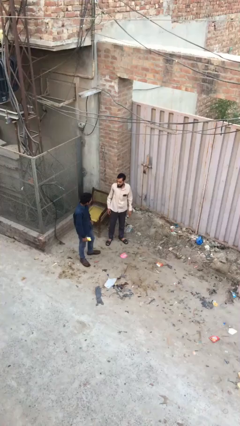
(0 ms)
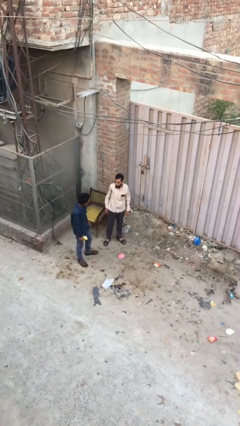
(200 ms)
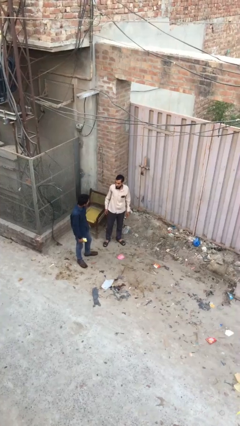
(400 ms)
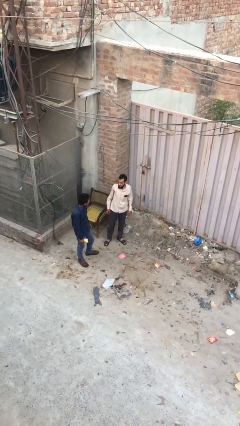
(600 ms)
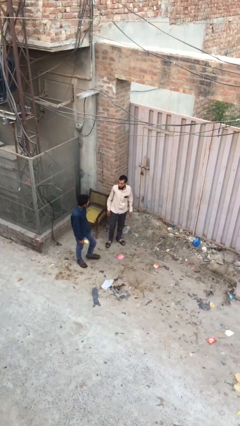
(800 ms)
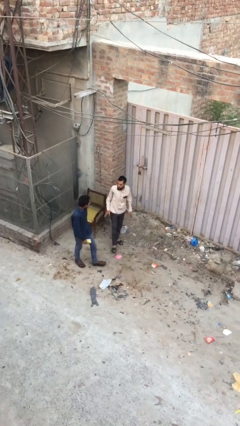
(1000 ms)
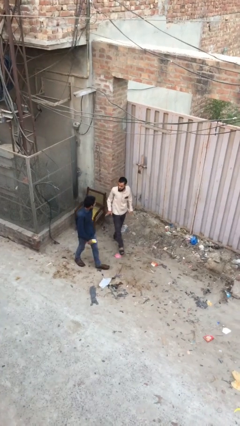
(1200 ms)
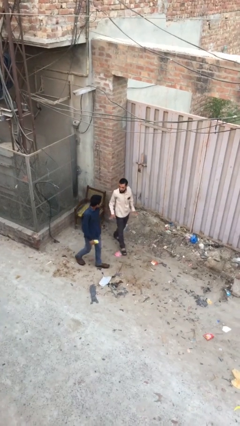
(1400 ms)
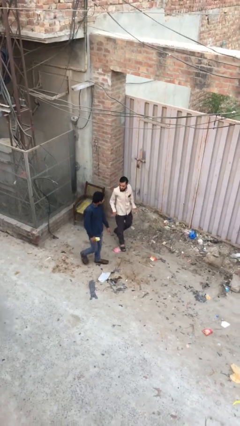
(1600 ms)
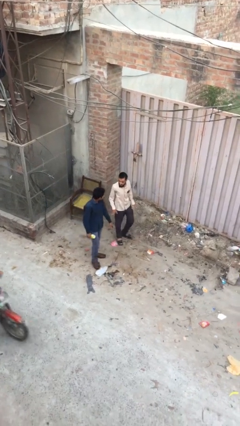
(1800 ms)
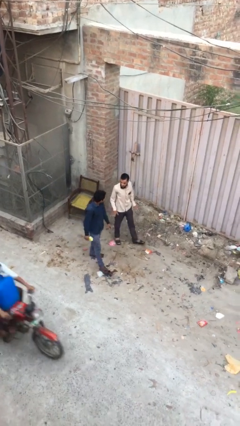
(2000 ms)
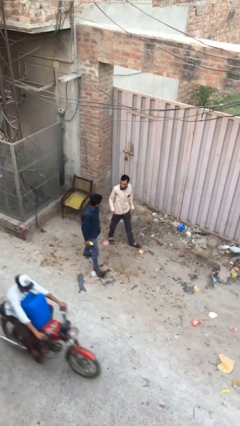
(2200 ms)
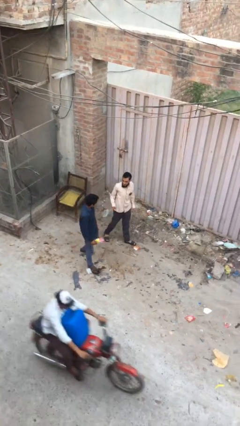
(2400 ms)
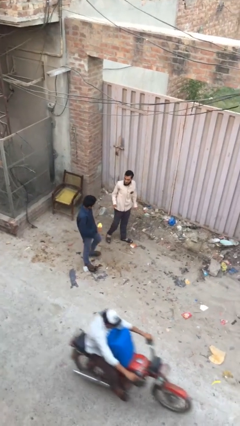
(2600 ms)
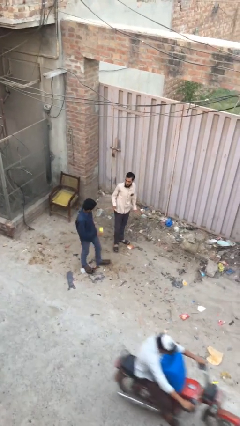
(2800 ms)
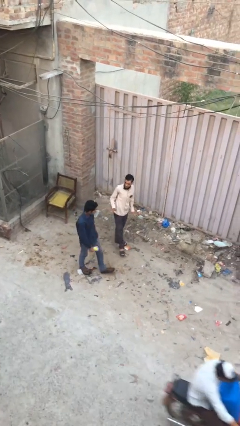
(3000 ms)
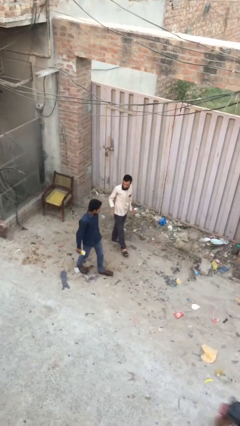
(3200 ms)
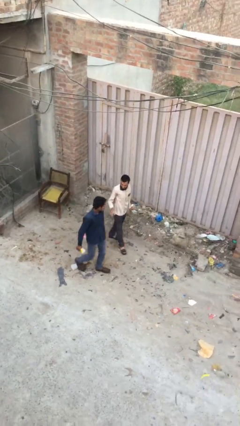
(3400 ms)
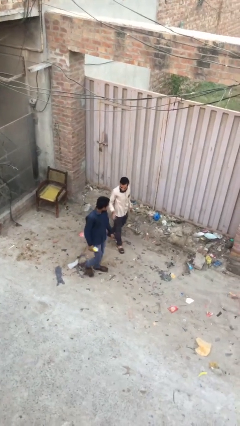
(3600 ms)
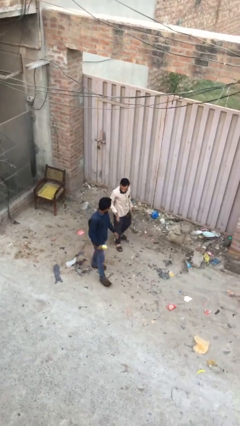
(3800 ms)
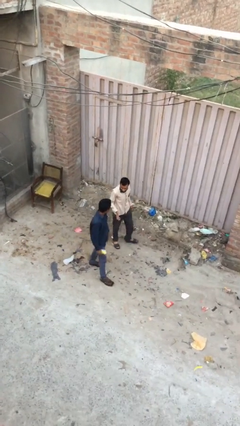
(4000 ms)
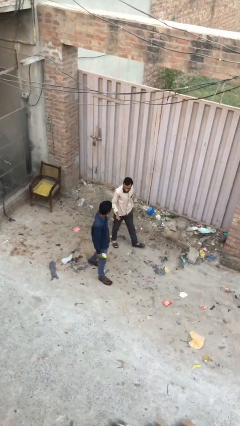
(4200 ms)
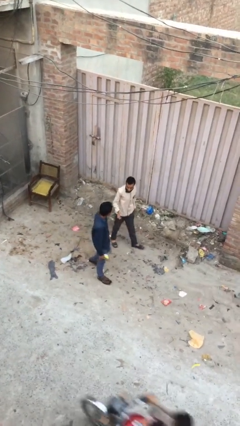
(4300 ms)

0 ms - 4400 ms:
person talks to person

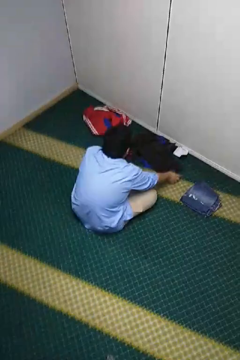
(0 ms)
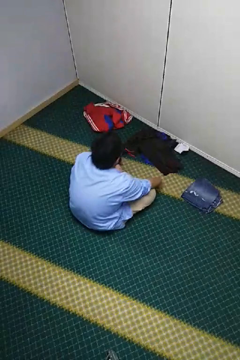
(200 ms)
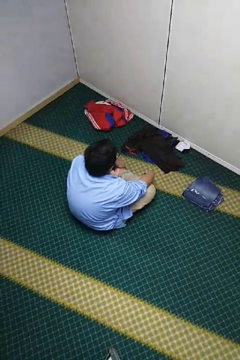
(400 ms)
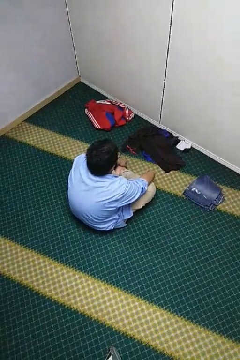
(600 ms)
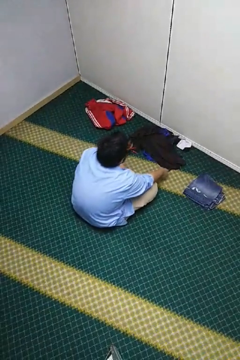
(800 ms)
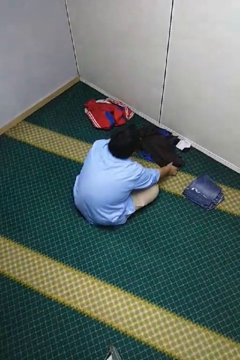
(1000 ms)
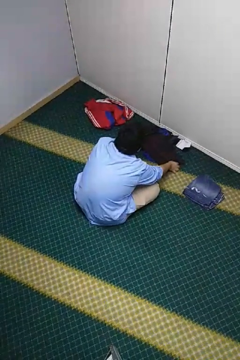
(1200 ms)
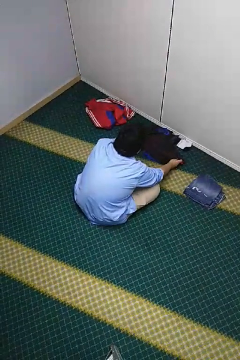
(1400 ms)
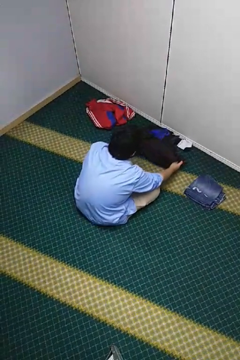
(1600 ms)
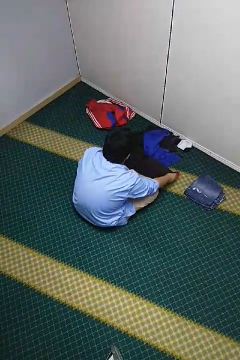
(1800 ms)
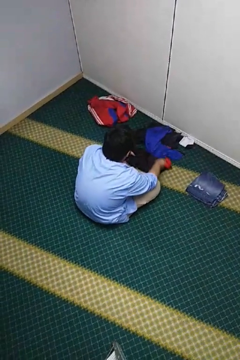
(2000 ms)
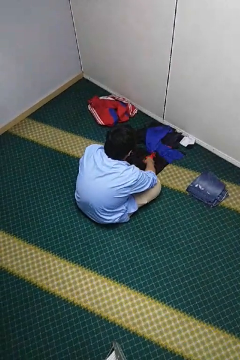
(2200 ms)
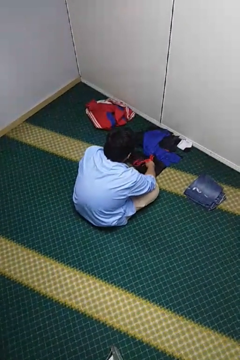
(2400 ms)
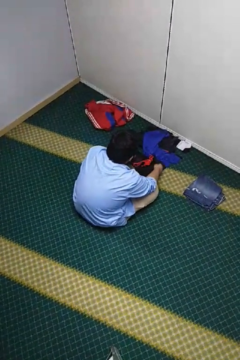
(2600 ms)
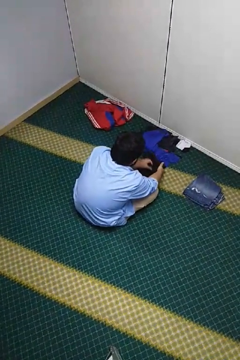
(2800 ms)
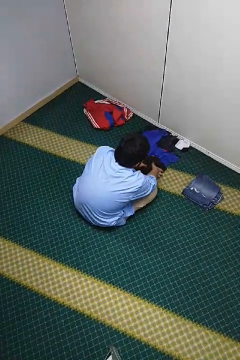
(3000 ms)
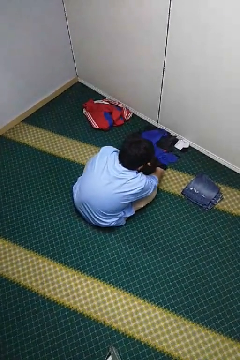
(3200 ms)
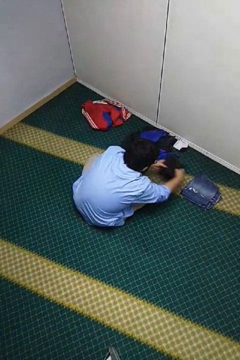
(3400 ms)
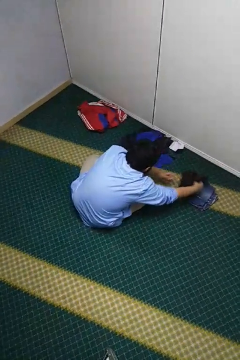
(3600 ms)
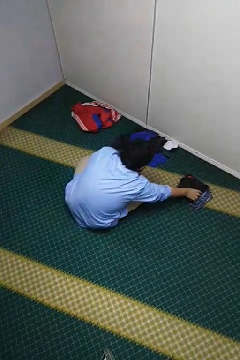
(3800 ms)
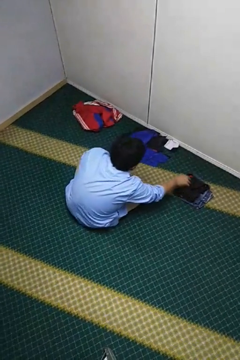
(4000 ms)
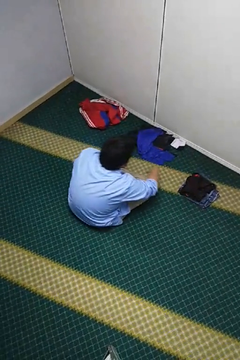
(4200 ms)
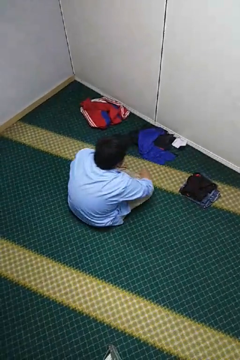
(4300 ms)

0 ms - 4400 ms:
person folds shirt

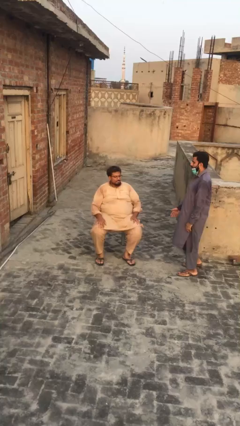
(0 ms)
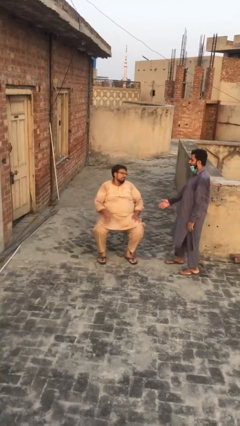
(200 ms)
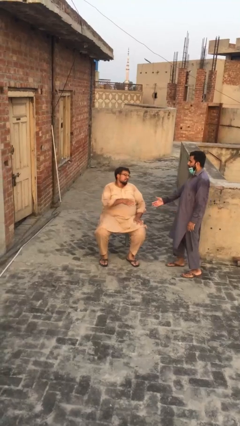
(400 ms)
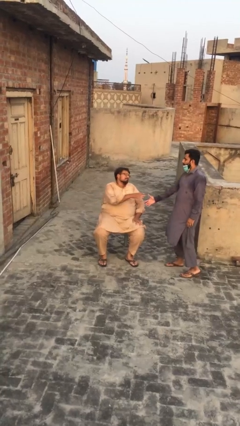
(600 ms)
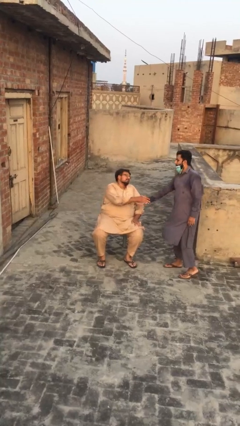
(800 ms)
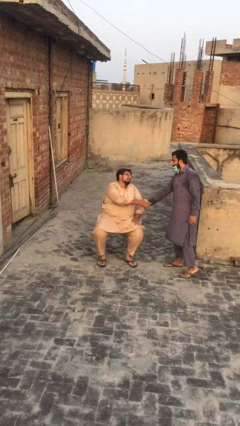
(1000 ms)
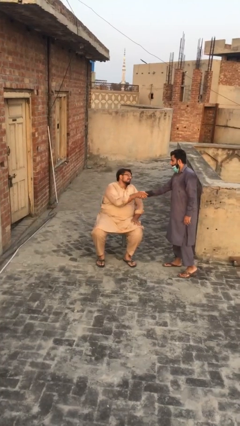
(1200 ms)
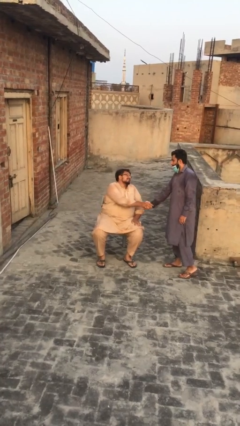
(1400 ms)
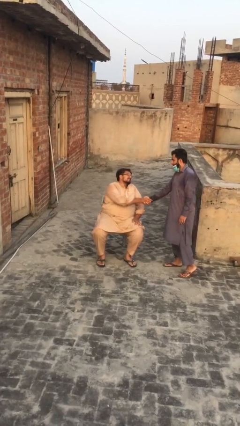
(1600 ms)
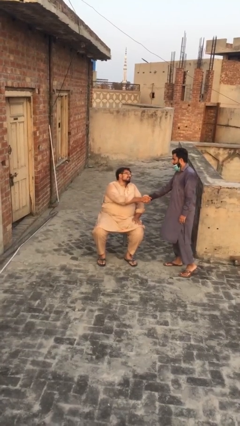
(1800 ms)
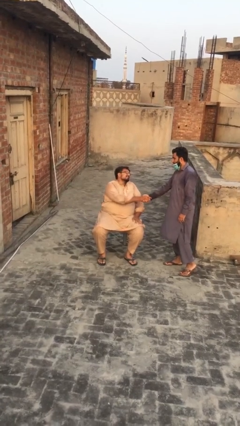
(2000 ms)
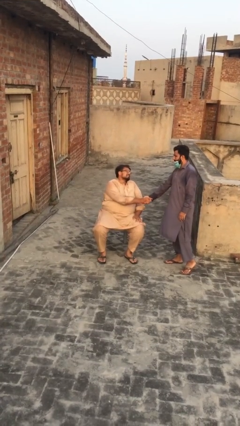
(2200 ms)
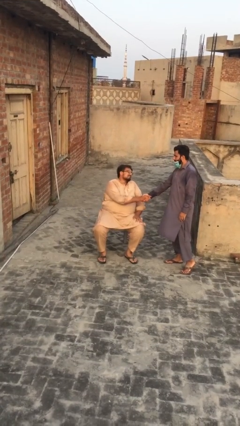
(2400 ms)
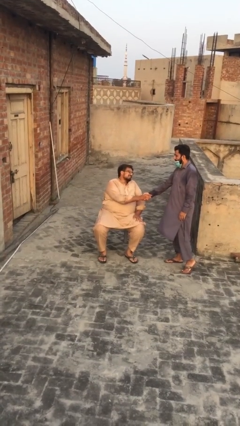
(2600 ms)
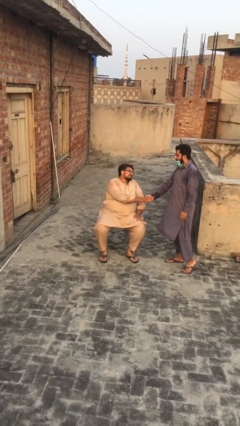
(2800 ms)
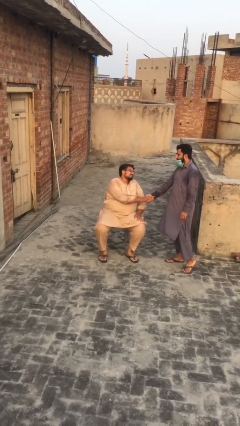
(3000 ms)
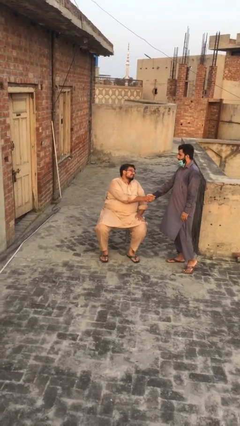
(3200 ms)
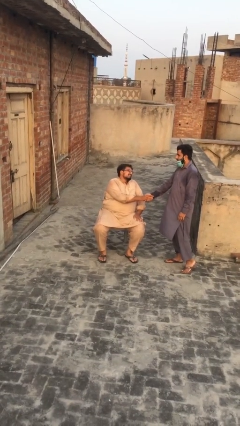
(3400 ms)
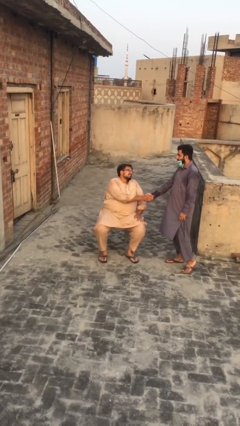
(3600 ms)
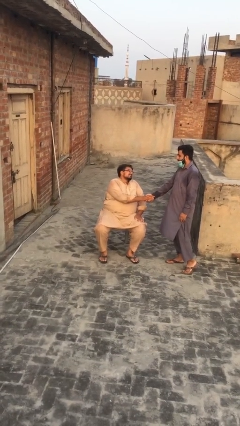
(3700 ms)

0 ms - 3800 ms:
person shakes hand

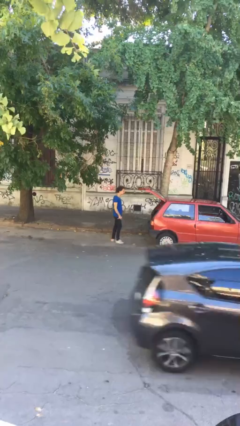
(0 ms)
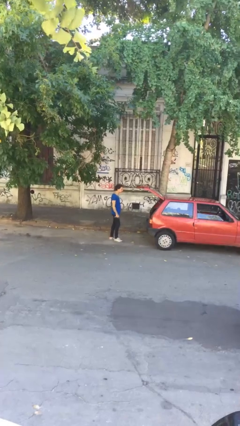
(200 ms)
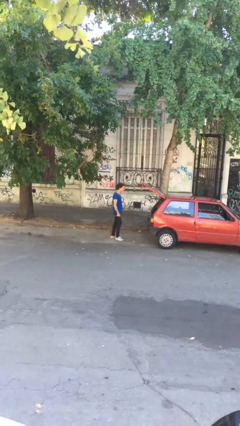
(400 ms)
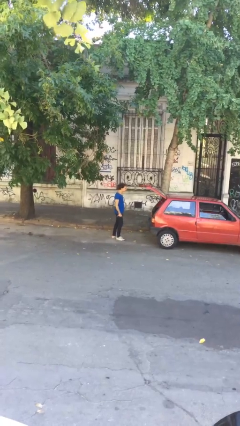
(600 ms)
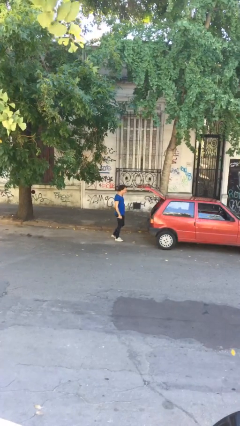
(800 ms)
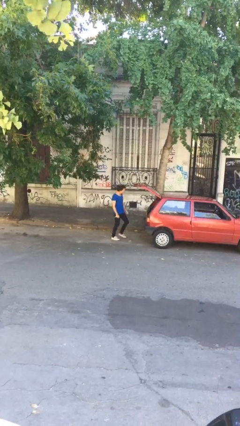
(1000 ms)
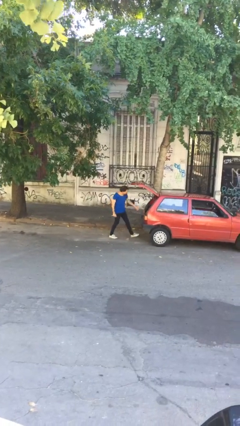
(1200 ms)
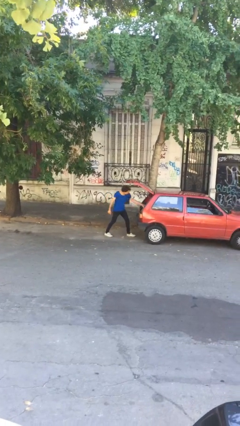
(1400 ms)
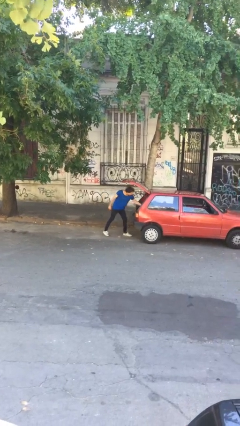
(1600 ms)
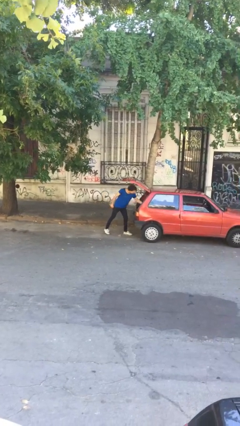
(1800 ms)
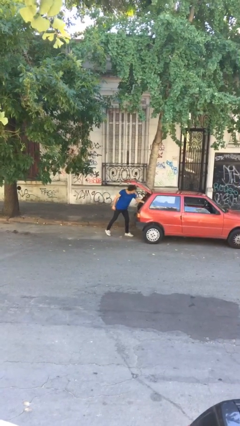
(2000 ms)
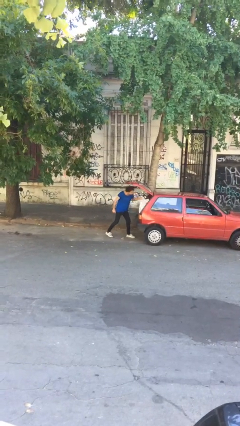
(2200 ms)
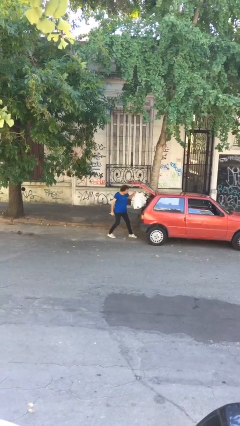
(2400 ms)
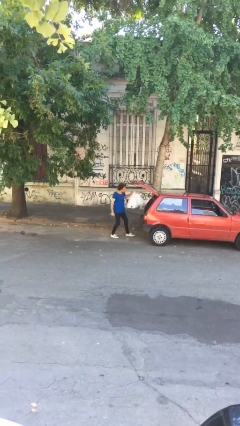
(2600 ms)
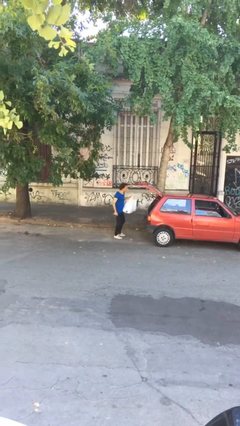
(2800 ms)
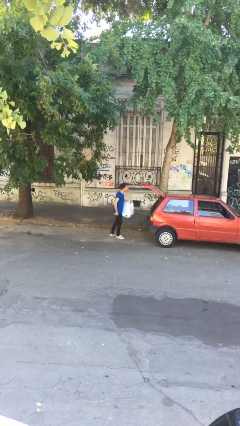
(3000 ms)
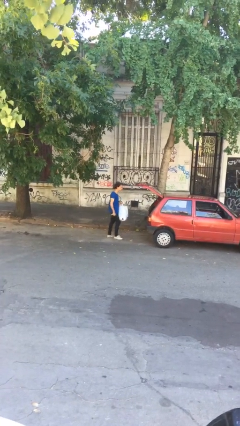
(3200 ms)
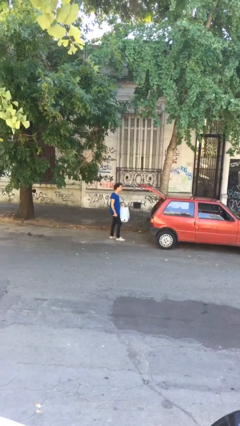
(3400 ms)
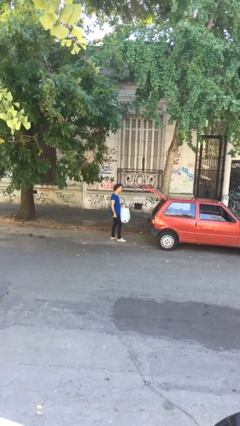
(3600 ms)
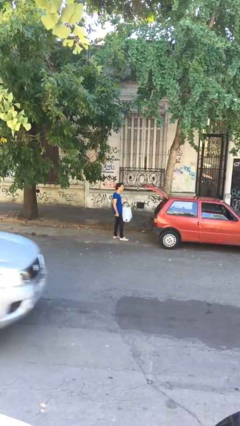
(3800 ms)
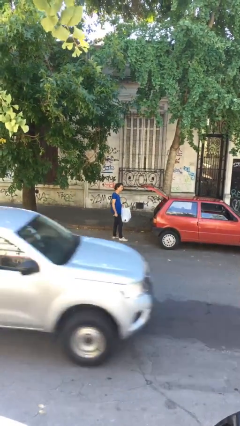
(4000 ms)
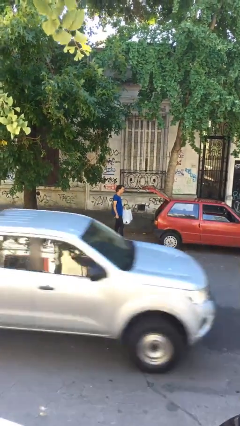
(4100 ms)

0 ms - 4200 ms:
person unloads car

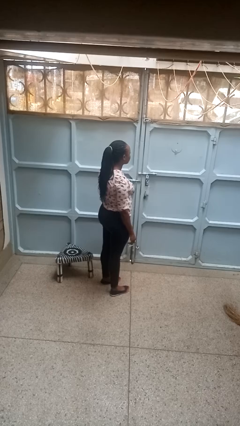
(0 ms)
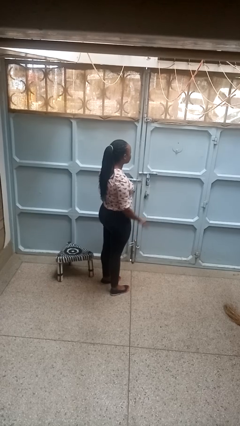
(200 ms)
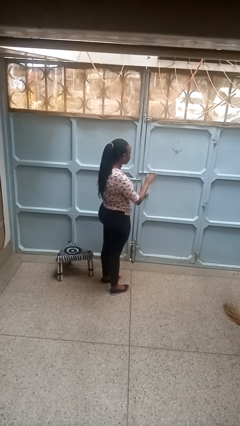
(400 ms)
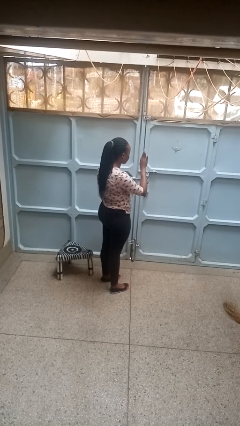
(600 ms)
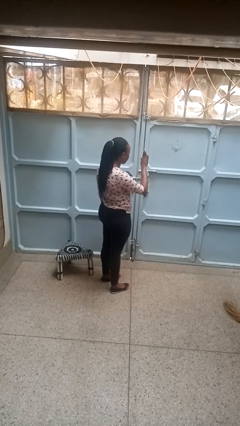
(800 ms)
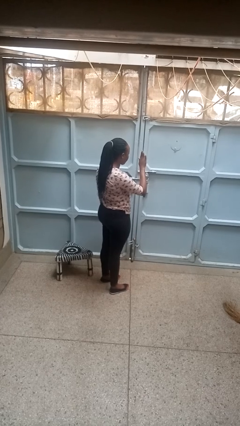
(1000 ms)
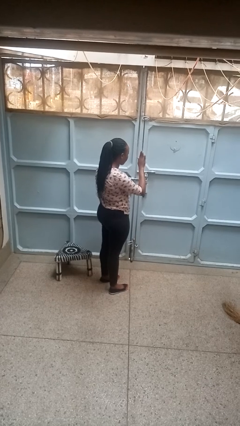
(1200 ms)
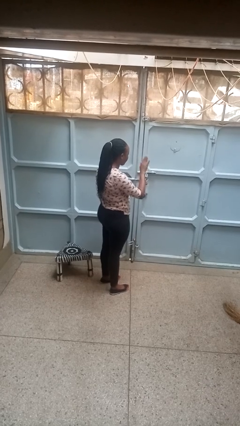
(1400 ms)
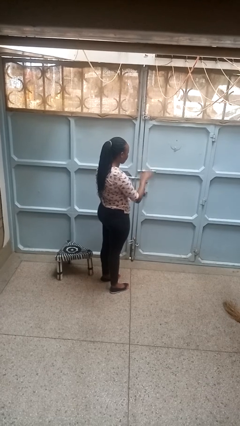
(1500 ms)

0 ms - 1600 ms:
person gestures stop

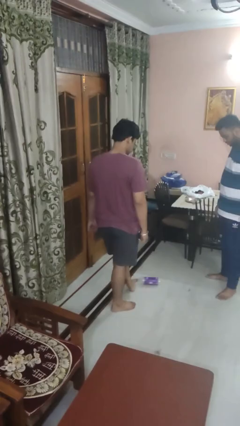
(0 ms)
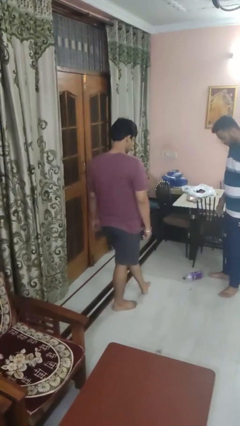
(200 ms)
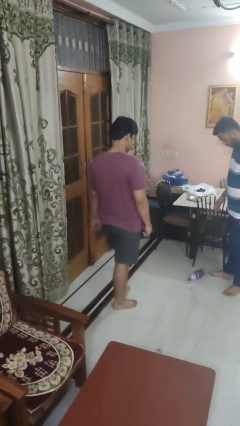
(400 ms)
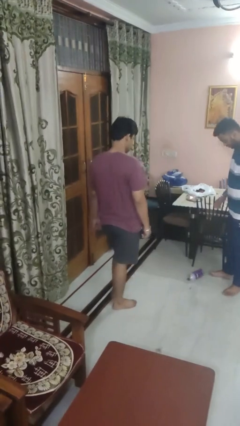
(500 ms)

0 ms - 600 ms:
person kicks object to person
